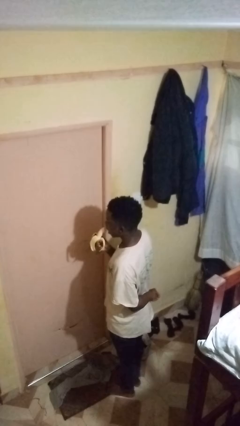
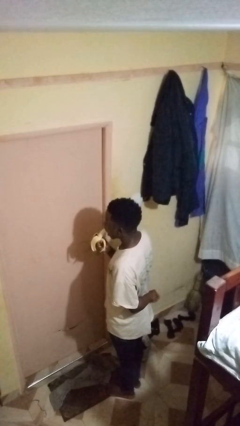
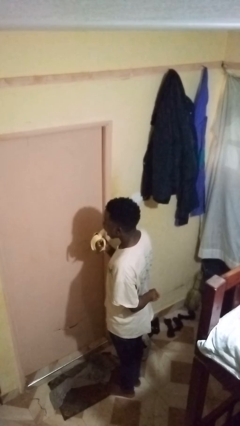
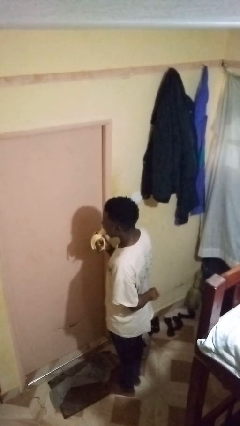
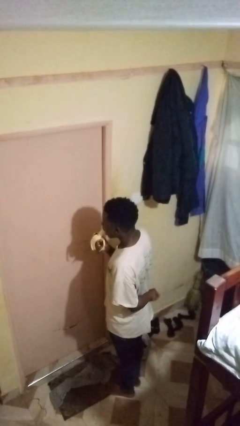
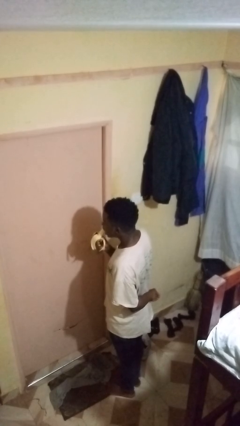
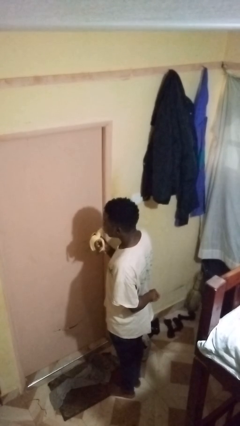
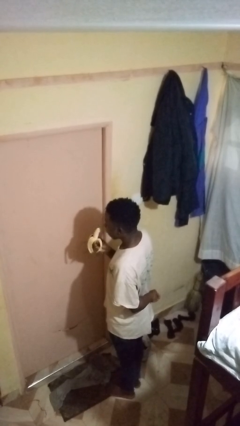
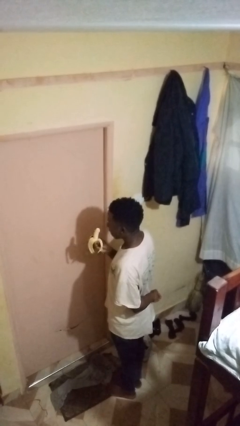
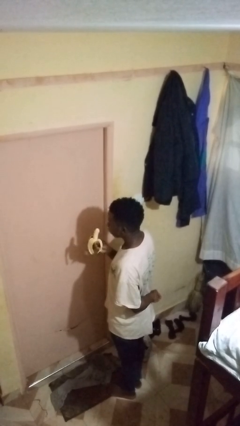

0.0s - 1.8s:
person eats banana

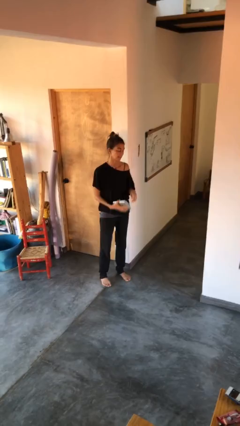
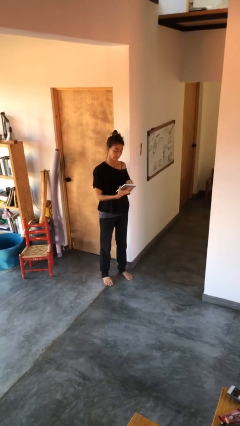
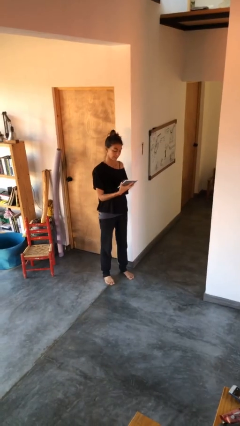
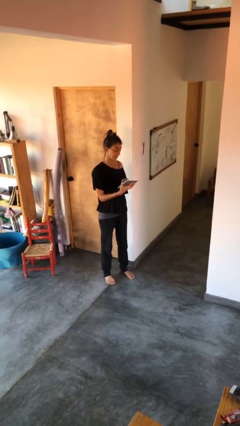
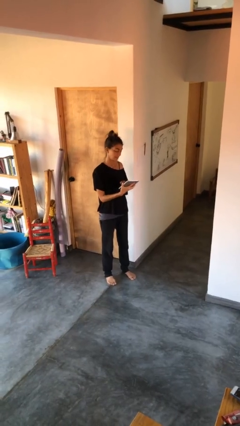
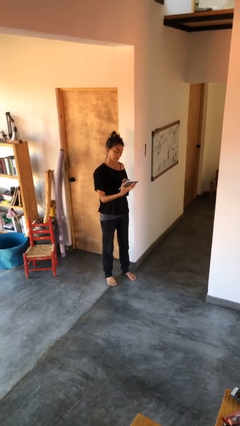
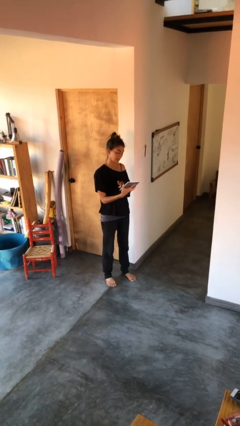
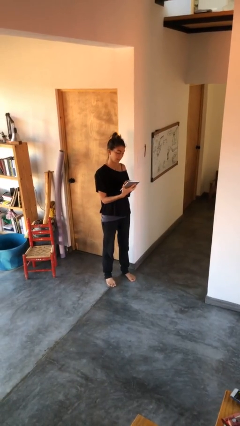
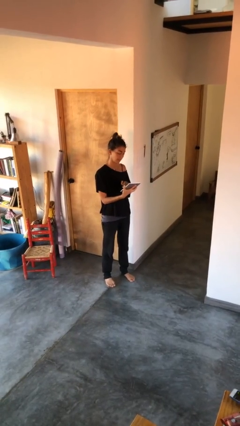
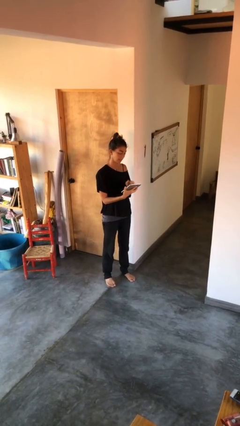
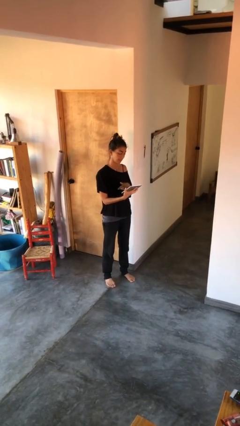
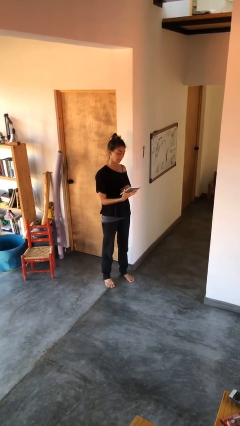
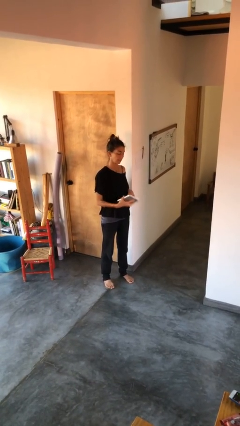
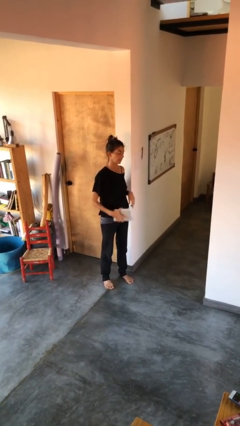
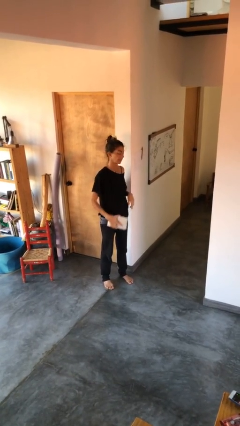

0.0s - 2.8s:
person interacts with tablet

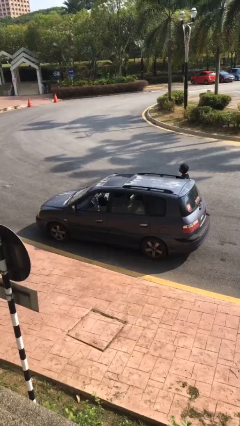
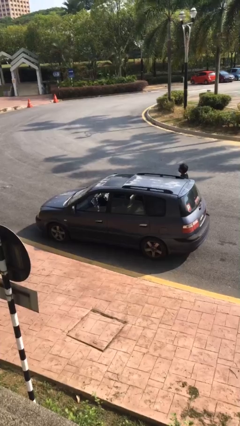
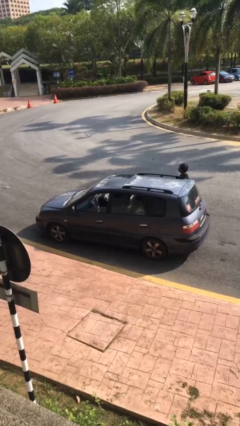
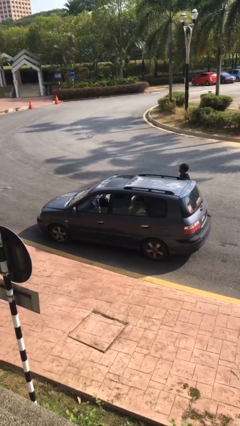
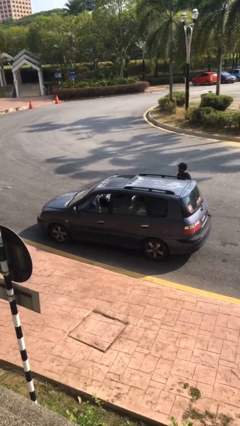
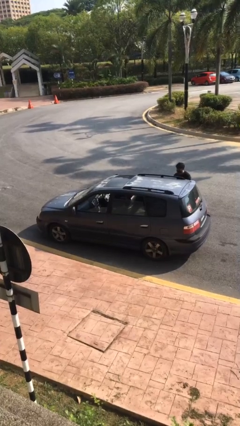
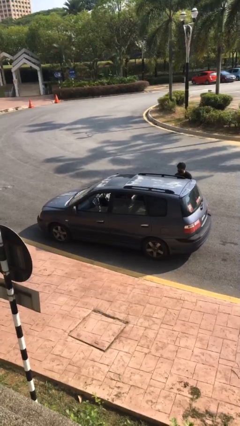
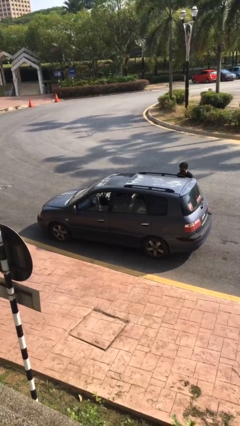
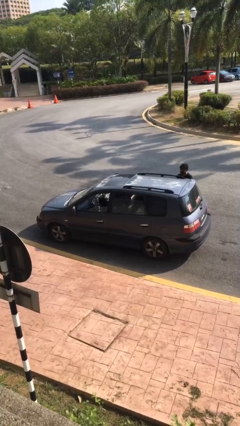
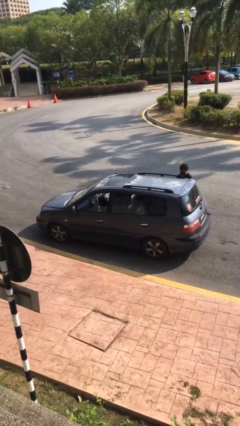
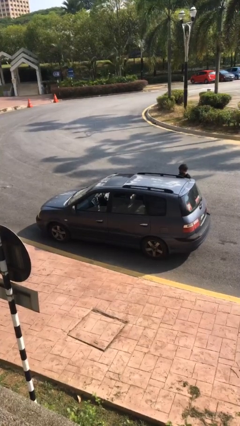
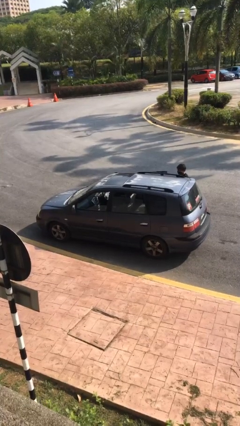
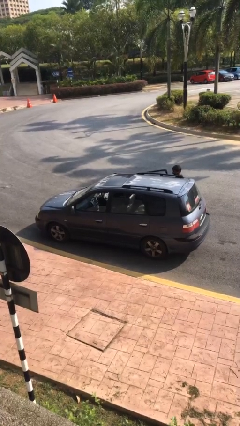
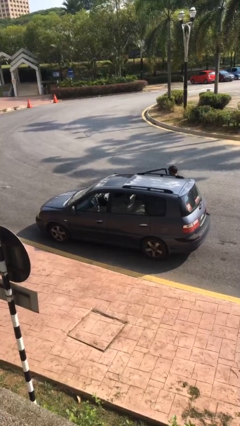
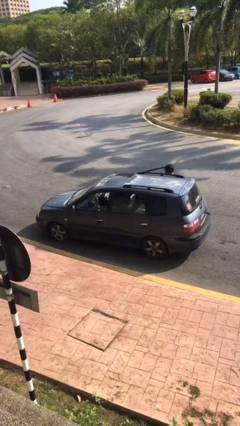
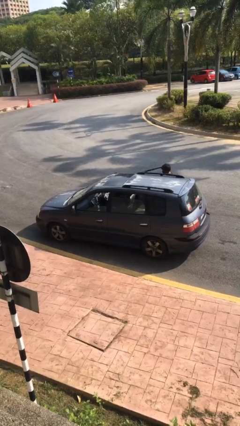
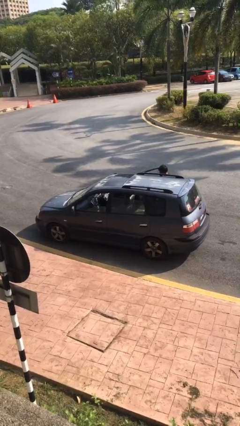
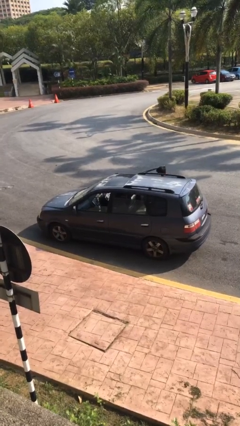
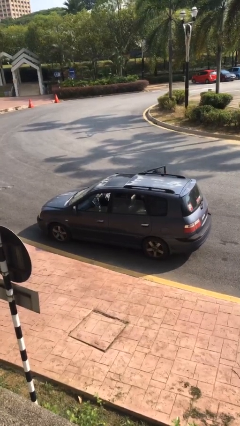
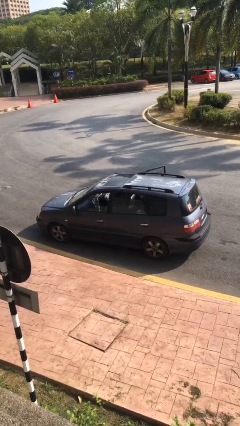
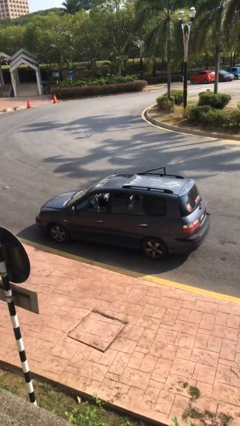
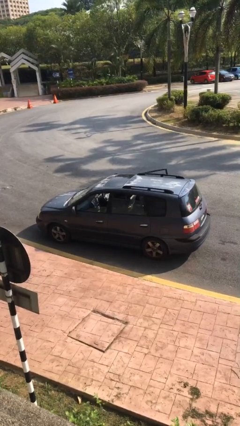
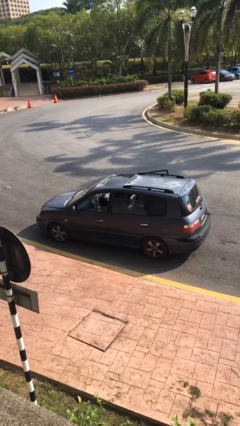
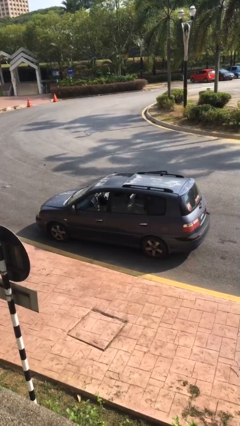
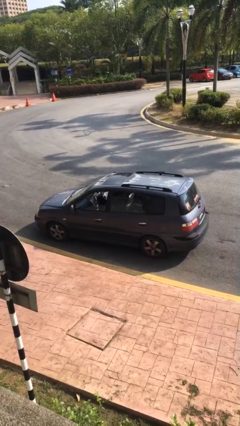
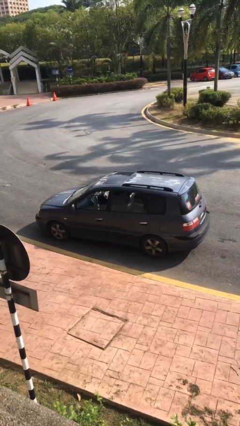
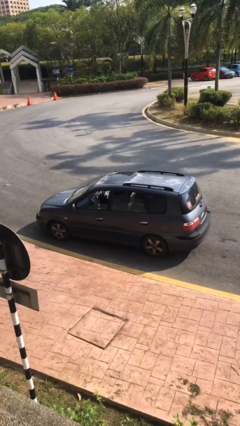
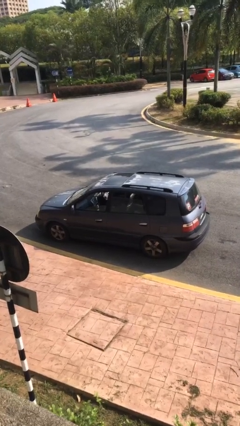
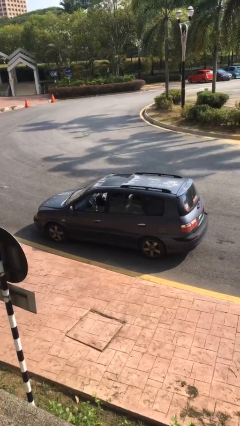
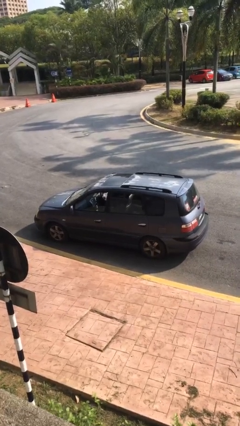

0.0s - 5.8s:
car picks up person

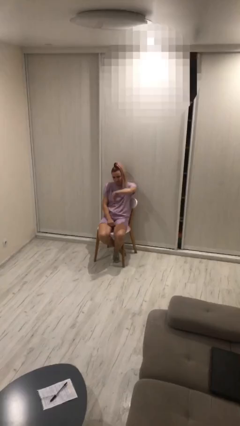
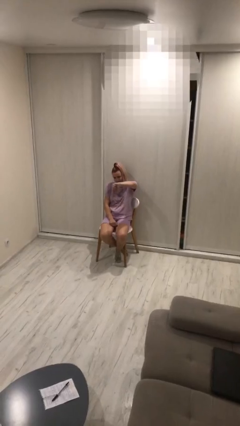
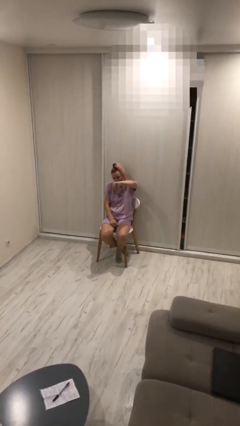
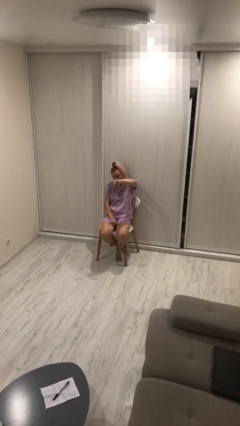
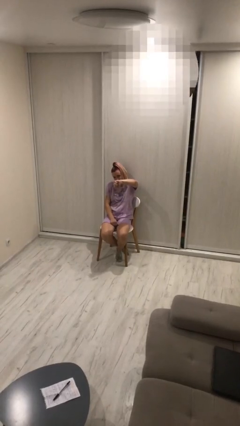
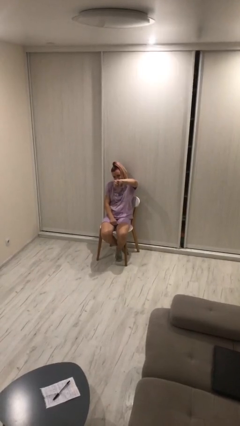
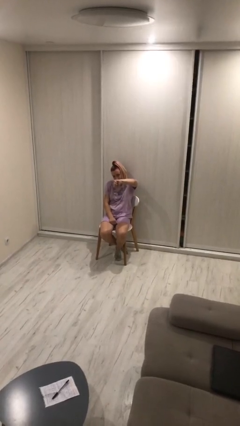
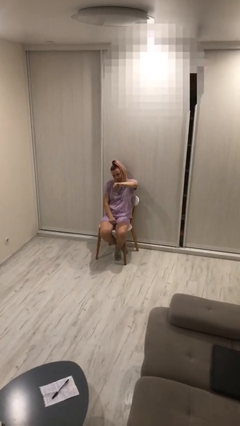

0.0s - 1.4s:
person gestures thumbs down

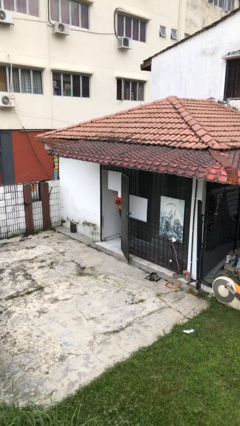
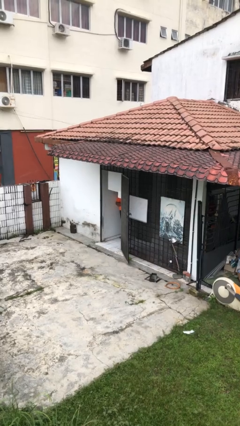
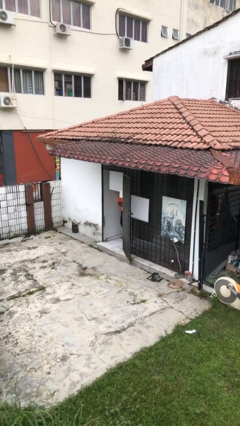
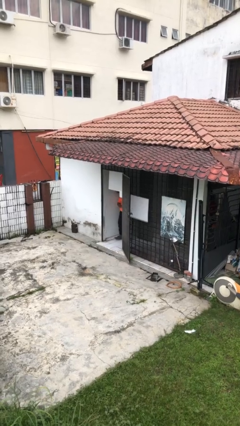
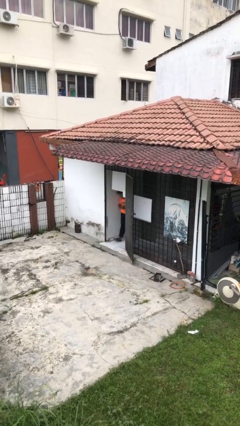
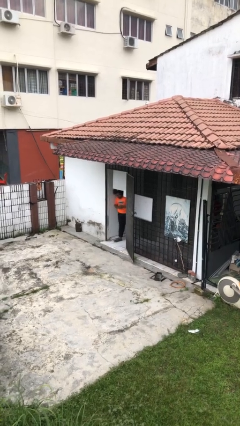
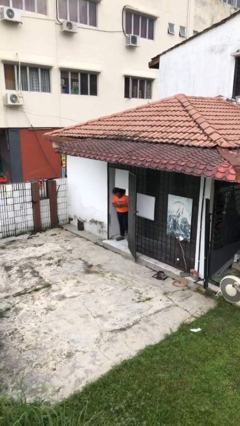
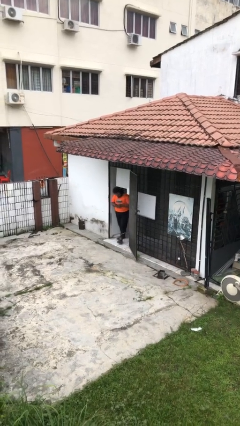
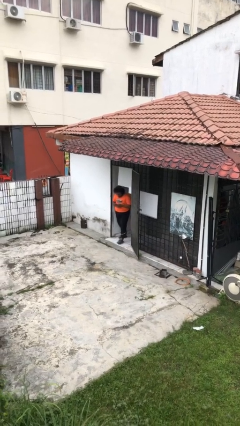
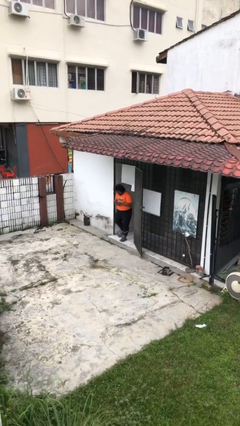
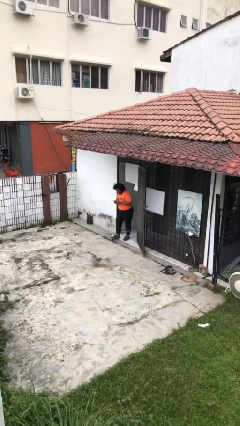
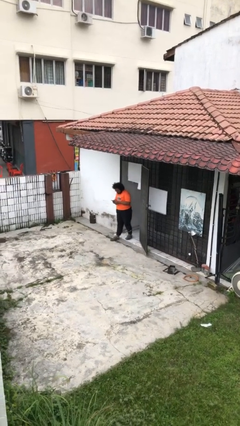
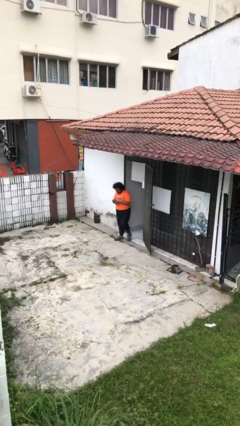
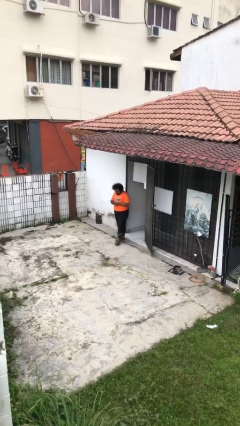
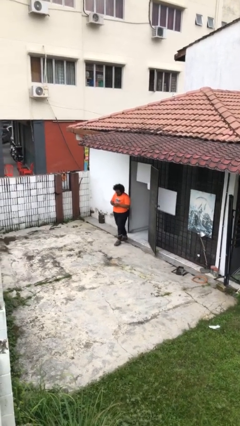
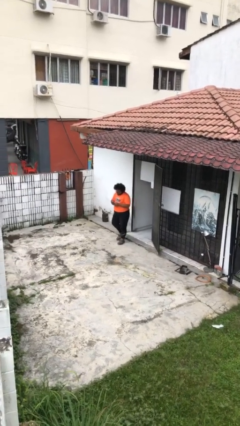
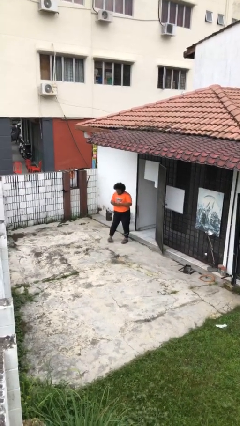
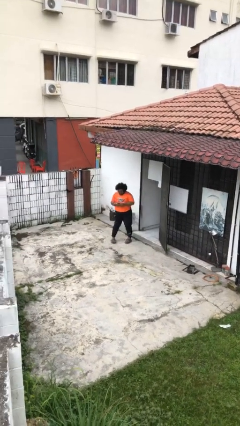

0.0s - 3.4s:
person enters scene through structure

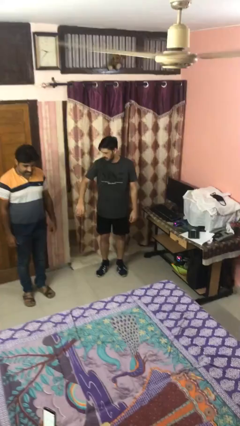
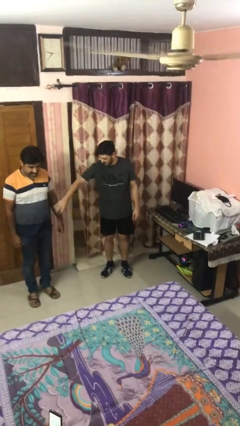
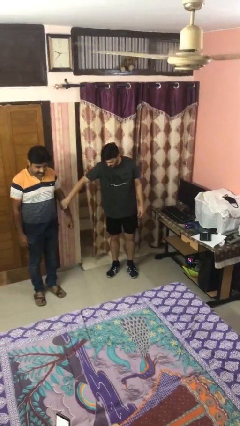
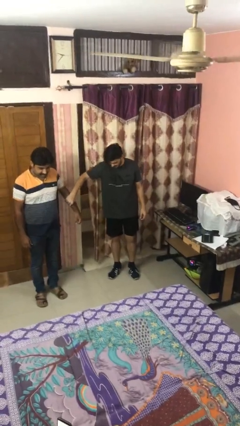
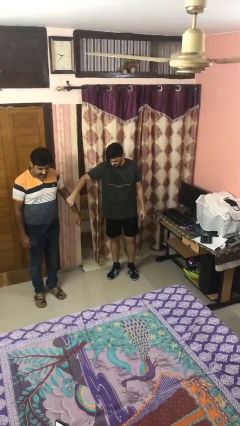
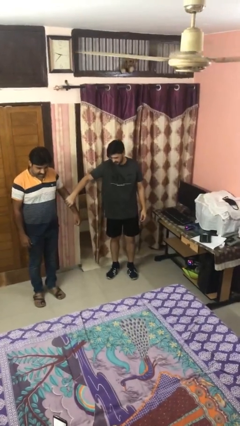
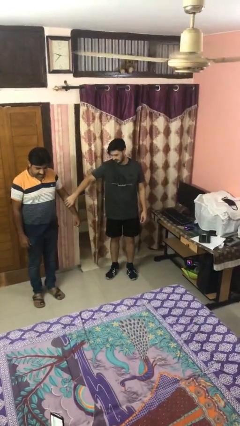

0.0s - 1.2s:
person grabs person by forearm

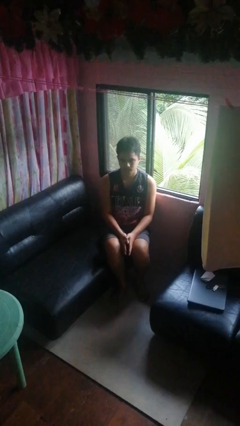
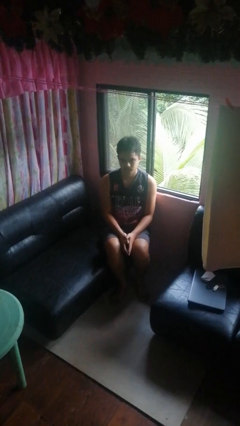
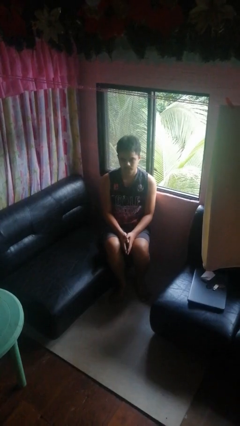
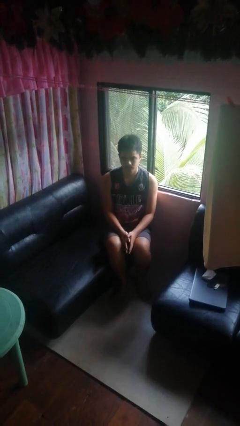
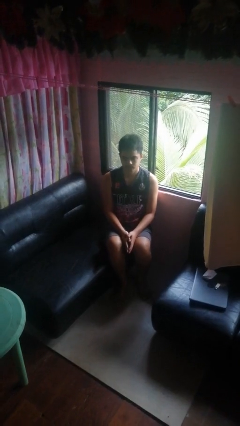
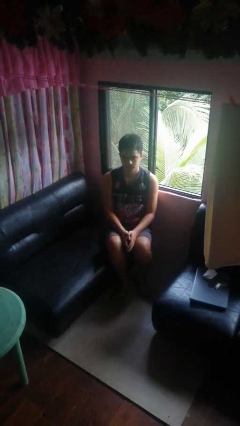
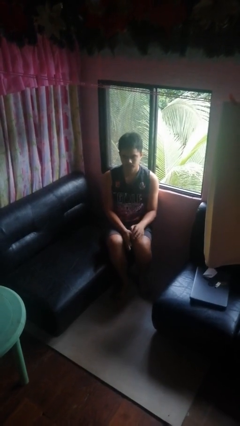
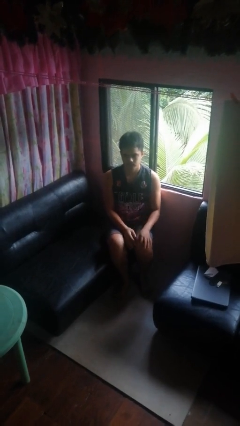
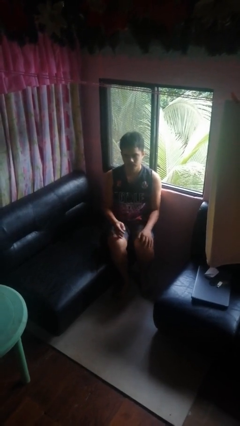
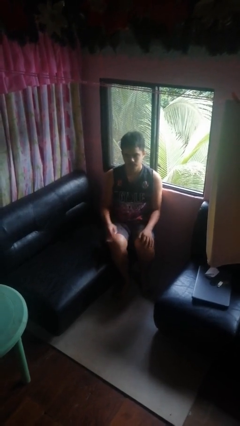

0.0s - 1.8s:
person gestures cut
